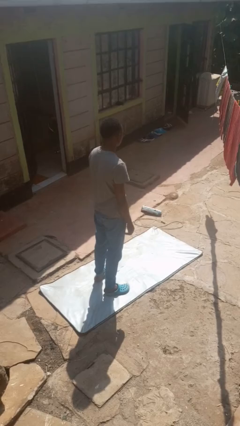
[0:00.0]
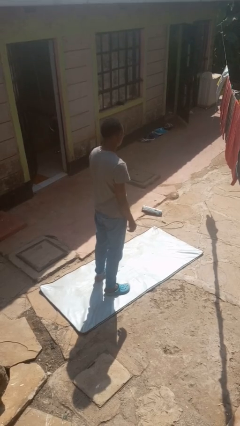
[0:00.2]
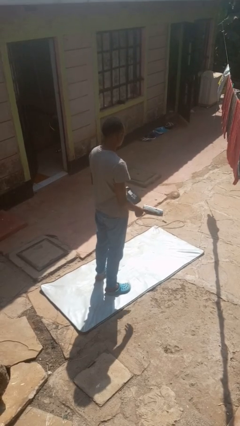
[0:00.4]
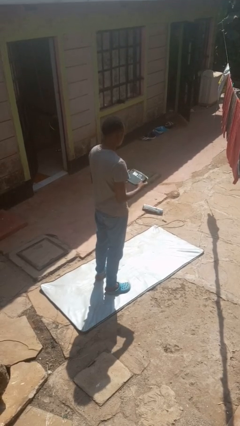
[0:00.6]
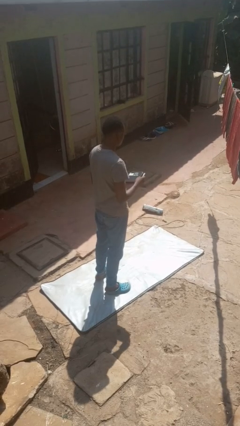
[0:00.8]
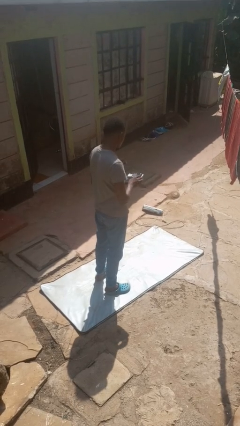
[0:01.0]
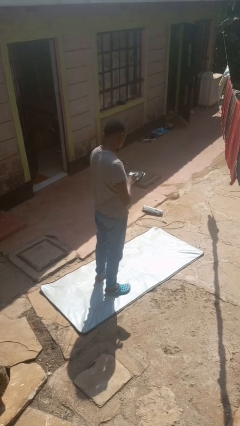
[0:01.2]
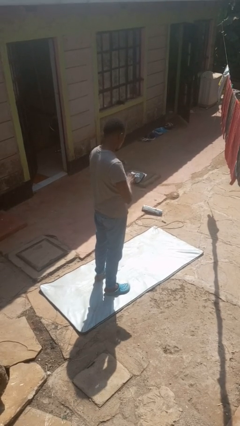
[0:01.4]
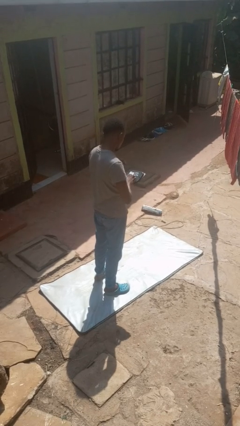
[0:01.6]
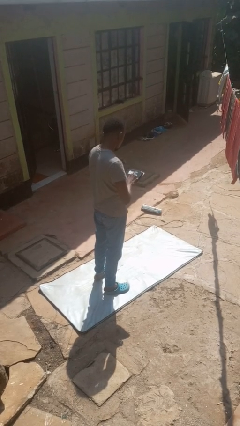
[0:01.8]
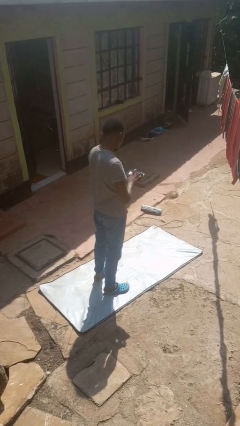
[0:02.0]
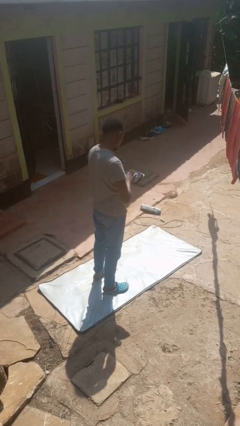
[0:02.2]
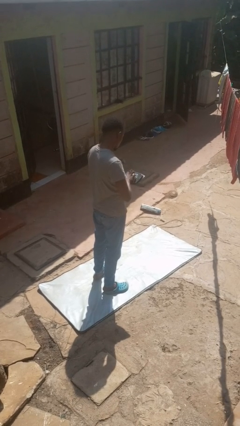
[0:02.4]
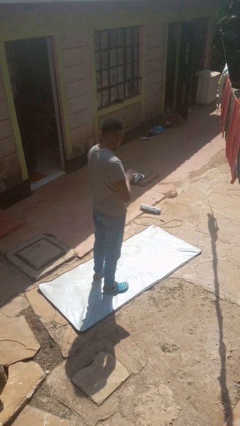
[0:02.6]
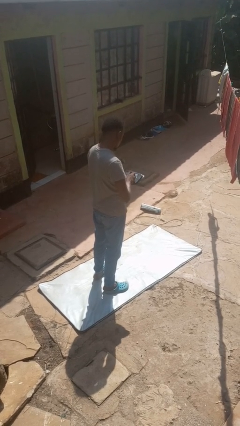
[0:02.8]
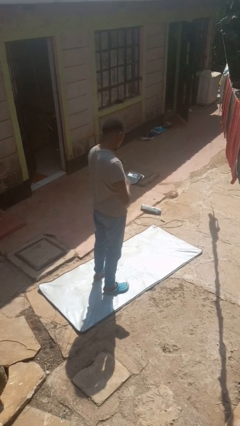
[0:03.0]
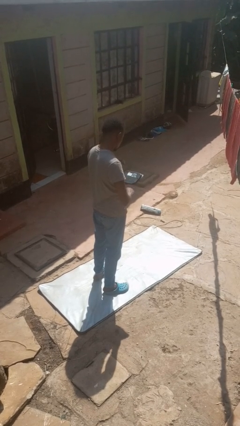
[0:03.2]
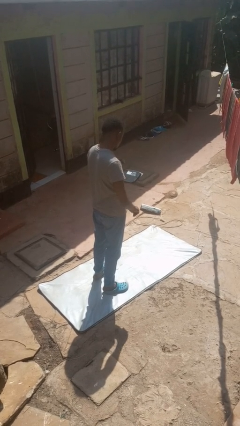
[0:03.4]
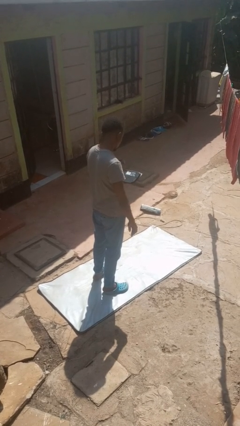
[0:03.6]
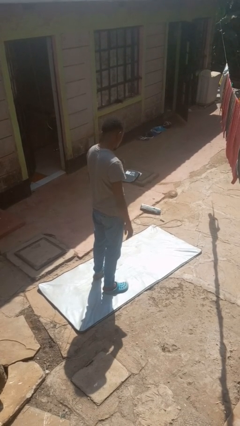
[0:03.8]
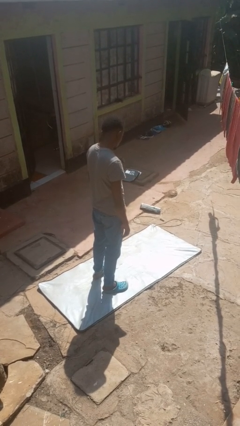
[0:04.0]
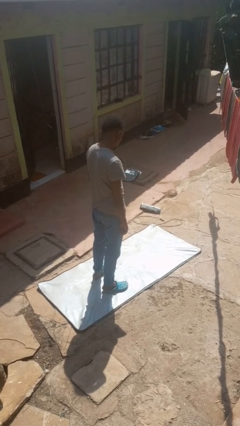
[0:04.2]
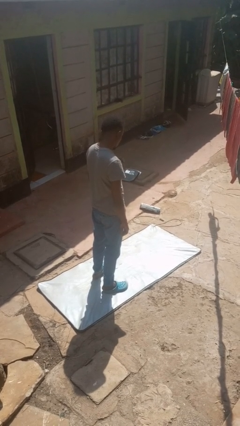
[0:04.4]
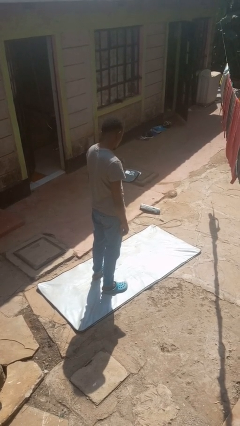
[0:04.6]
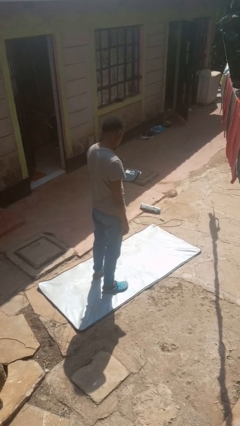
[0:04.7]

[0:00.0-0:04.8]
person interacts with tablet

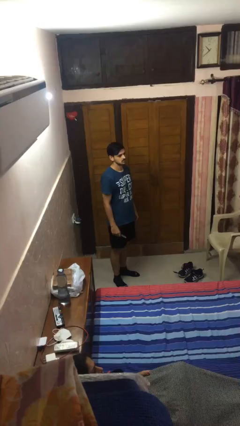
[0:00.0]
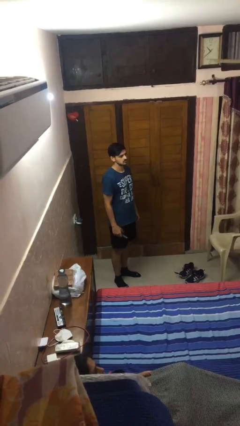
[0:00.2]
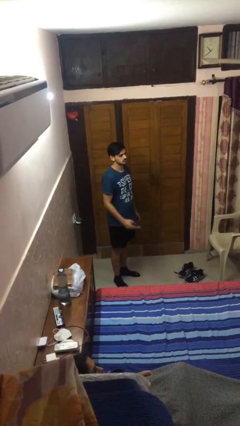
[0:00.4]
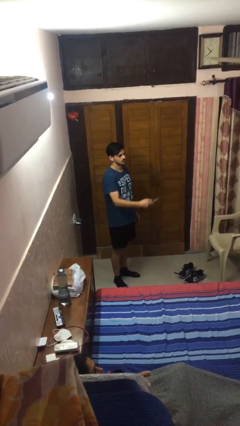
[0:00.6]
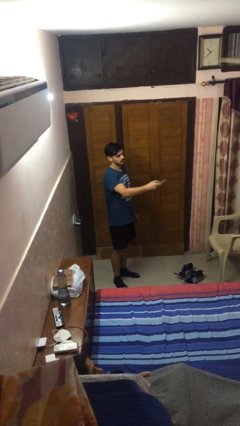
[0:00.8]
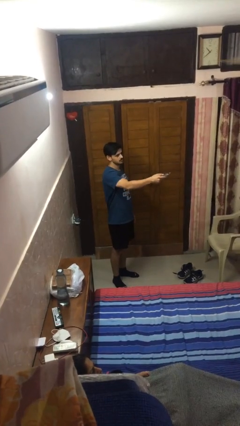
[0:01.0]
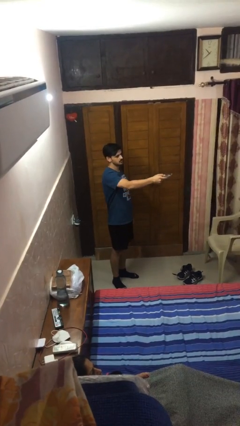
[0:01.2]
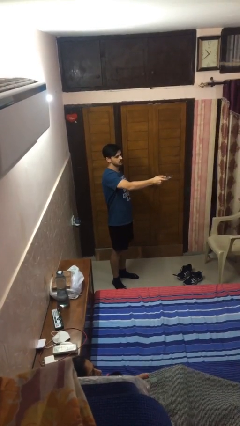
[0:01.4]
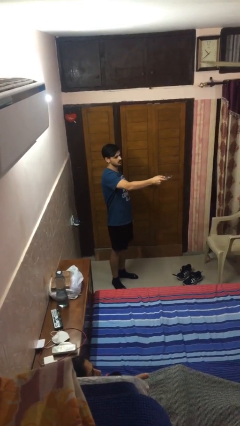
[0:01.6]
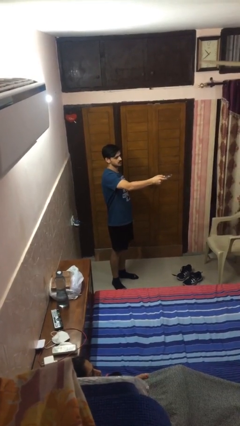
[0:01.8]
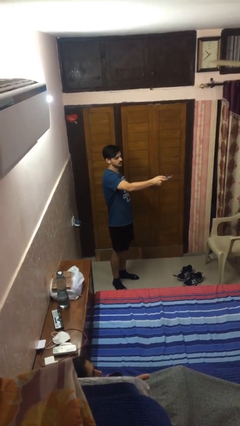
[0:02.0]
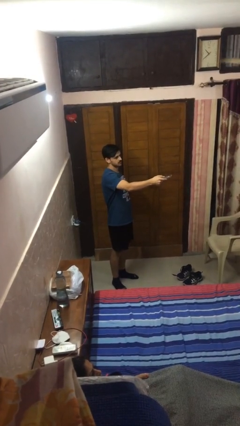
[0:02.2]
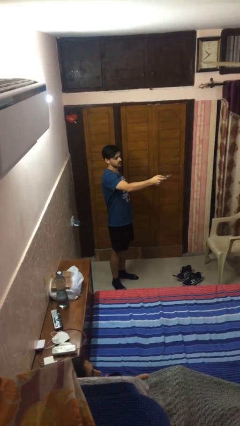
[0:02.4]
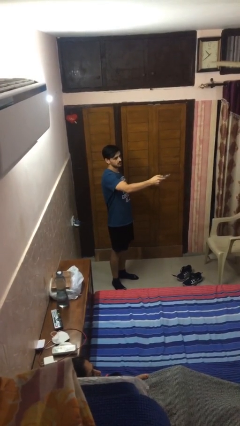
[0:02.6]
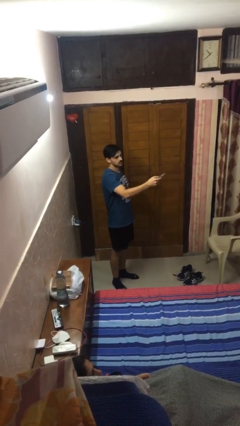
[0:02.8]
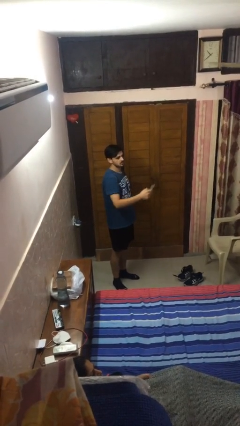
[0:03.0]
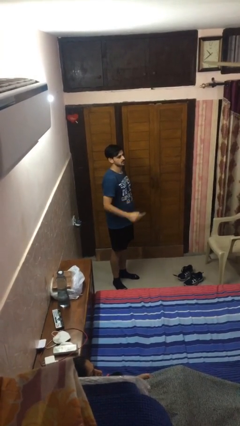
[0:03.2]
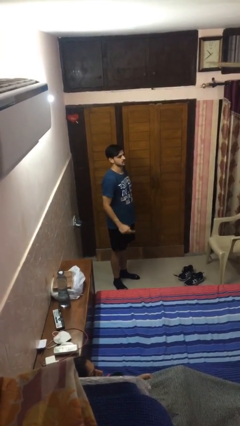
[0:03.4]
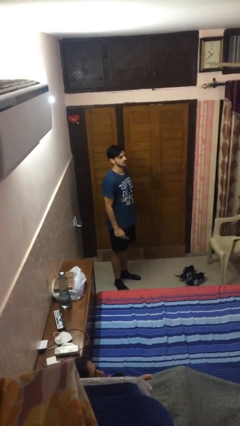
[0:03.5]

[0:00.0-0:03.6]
person uses television remote

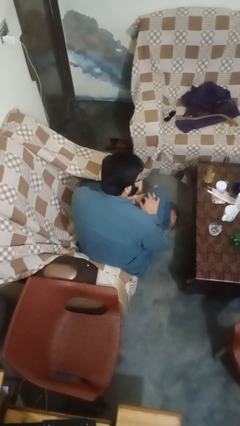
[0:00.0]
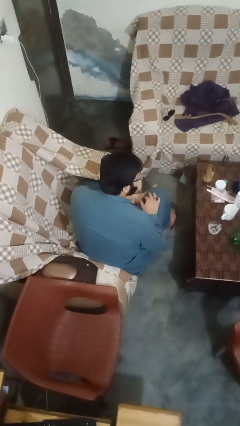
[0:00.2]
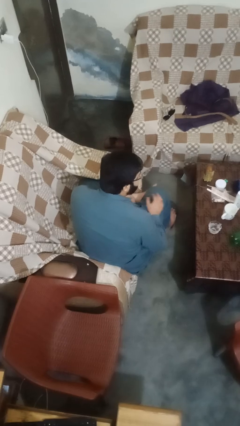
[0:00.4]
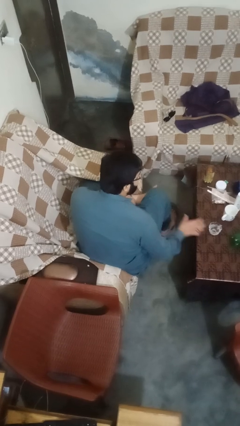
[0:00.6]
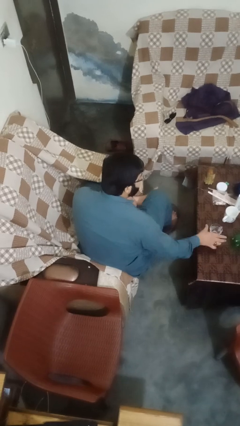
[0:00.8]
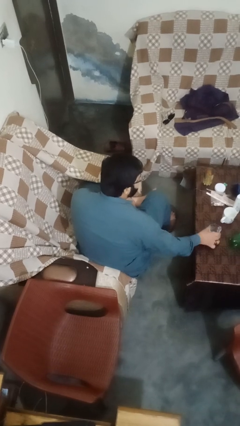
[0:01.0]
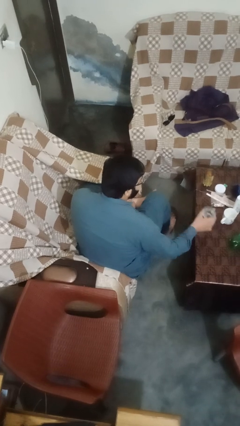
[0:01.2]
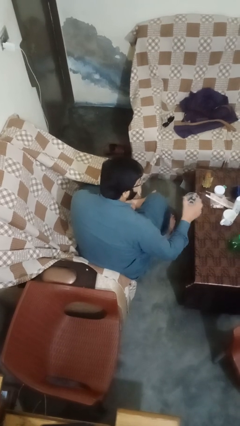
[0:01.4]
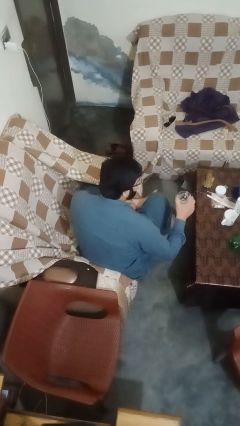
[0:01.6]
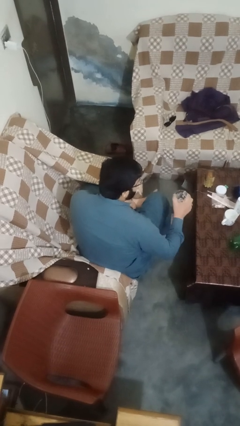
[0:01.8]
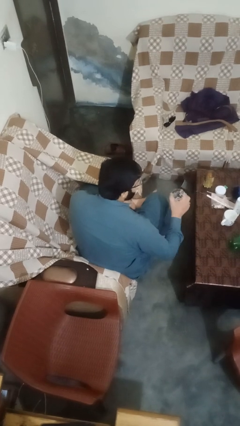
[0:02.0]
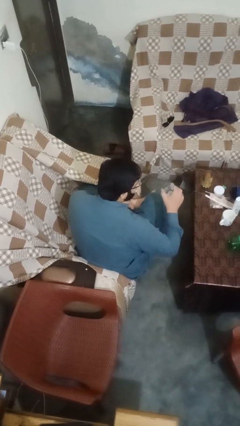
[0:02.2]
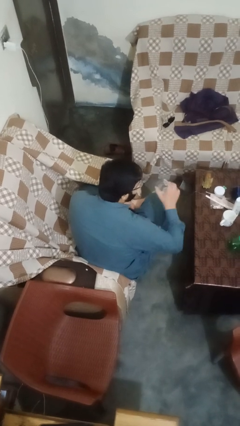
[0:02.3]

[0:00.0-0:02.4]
person picks up object from table

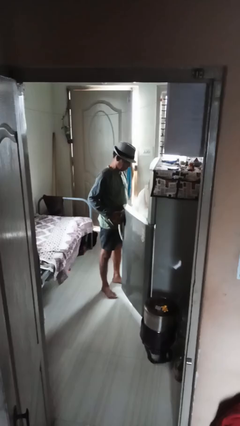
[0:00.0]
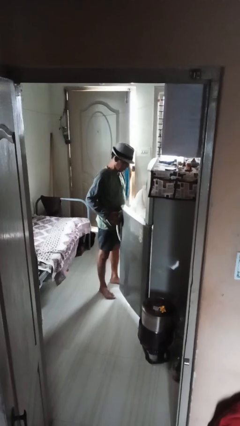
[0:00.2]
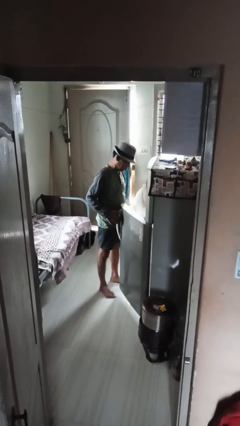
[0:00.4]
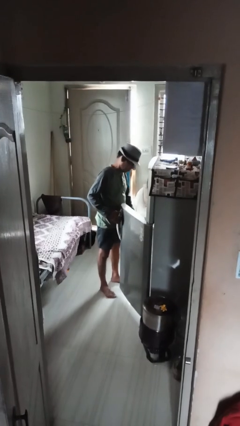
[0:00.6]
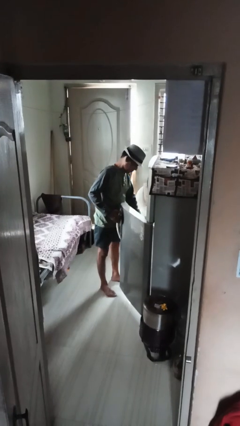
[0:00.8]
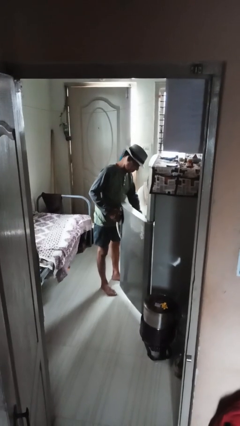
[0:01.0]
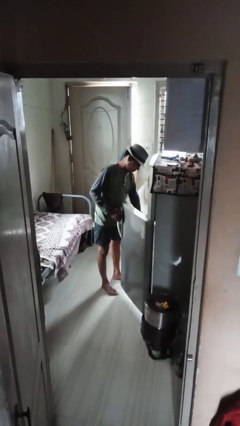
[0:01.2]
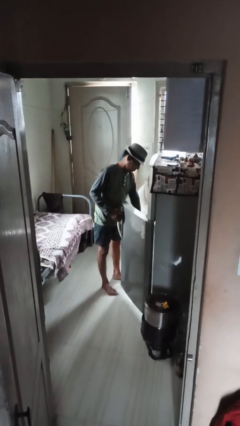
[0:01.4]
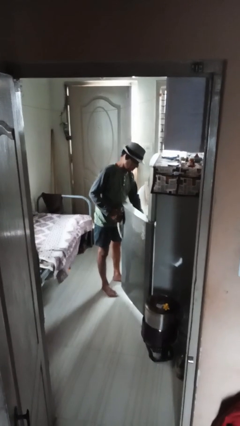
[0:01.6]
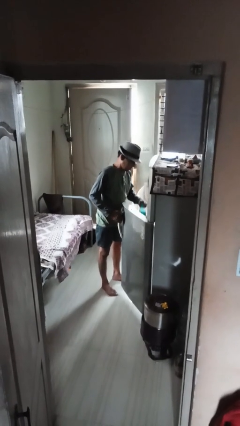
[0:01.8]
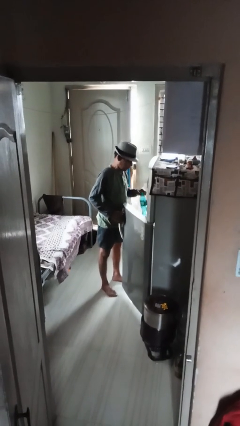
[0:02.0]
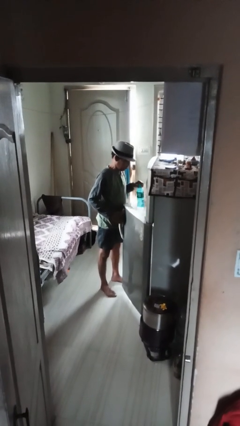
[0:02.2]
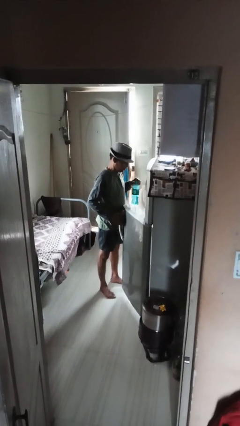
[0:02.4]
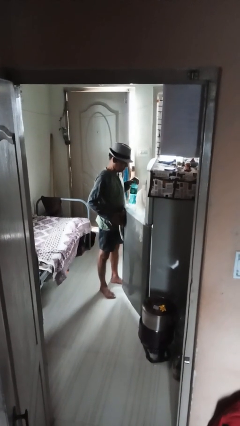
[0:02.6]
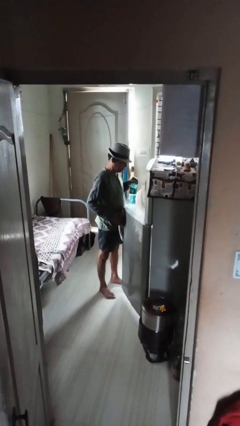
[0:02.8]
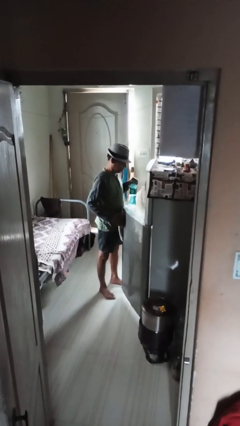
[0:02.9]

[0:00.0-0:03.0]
person takes object from refrigerator

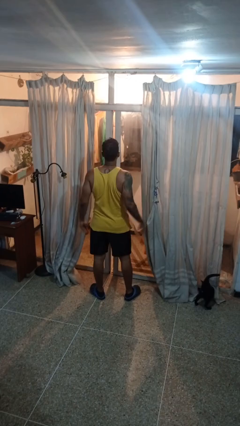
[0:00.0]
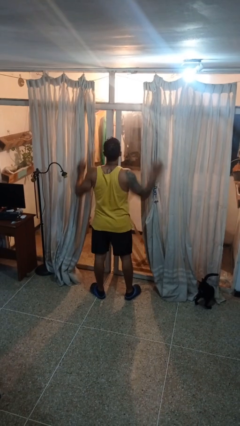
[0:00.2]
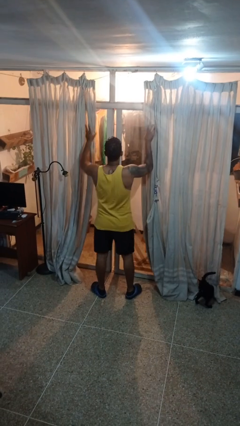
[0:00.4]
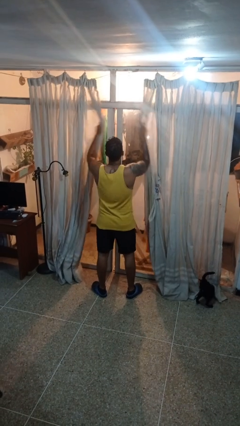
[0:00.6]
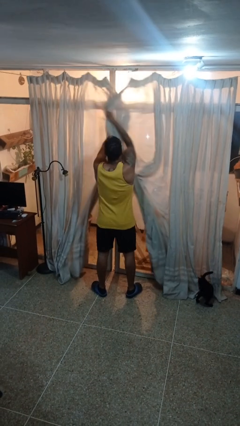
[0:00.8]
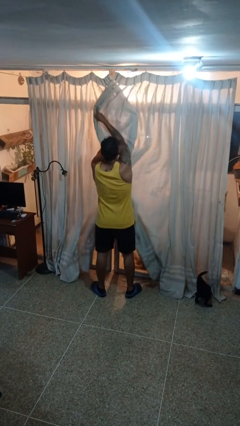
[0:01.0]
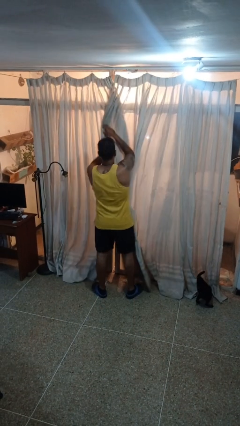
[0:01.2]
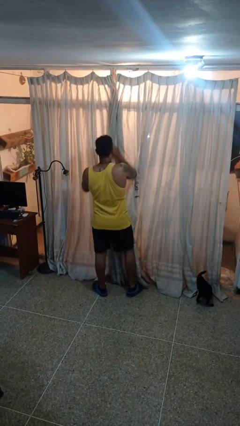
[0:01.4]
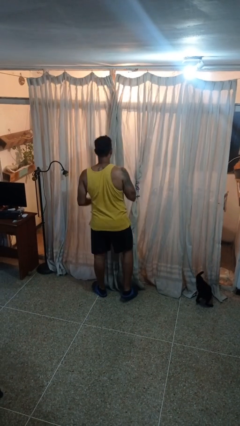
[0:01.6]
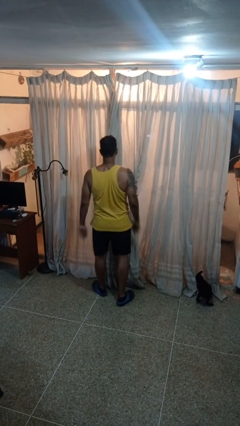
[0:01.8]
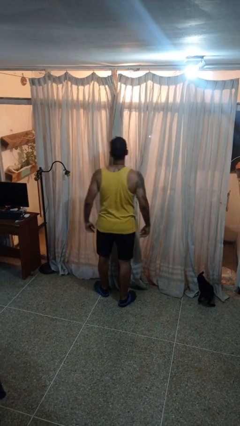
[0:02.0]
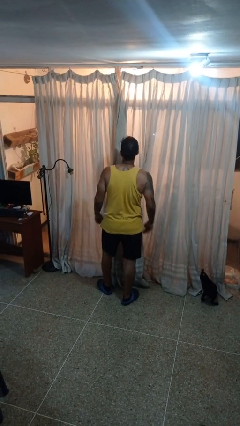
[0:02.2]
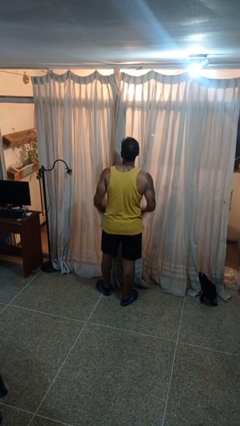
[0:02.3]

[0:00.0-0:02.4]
person closes curtains

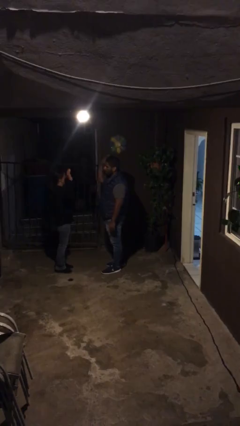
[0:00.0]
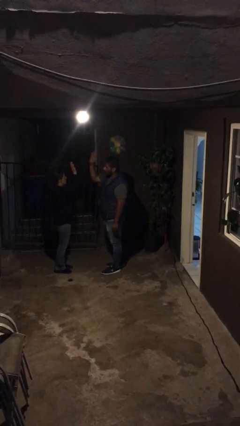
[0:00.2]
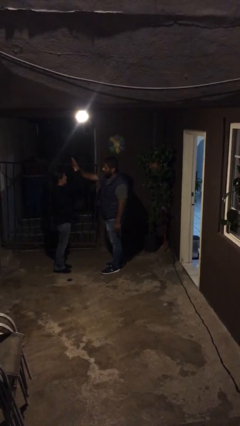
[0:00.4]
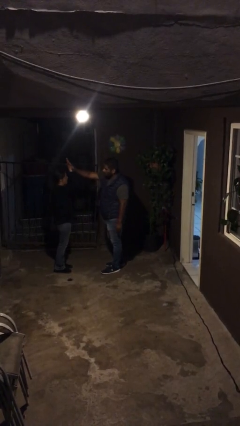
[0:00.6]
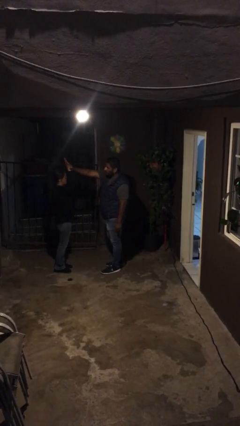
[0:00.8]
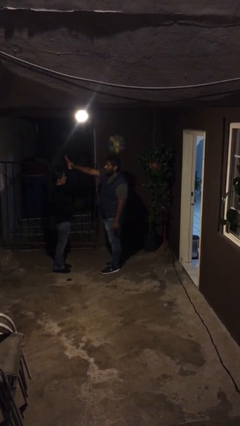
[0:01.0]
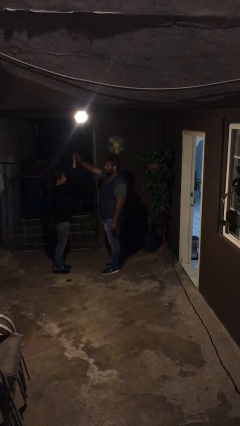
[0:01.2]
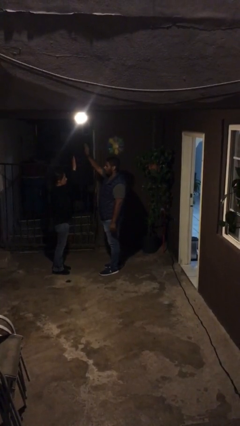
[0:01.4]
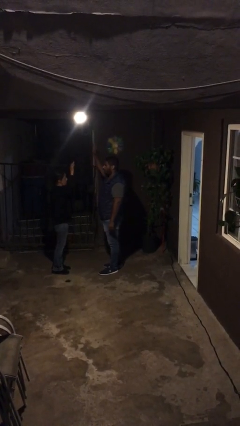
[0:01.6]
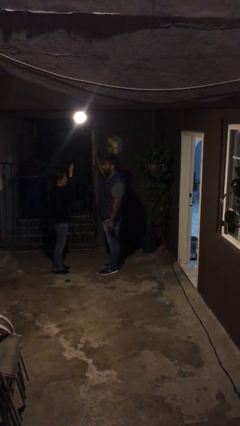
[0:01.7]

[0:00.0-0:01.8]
person highfives hand
